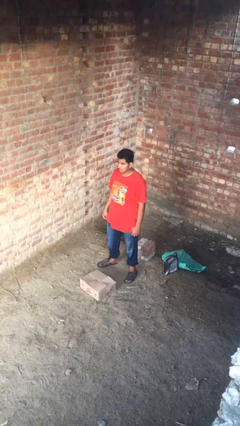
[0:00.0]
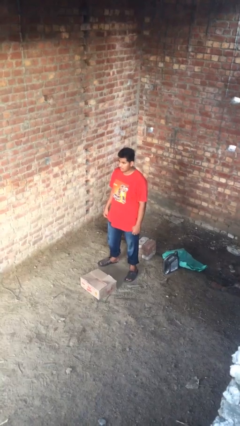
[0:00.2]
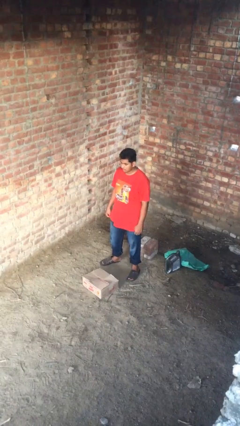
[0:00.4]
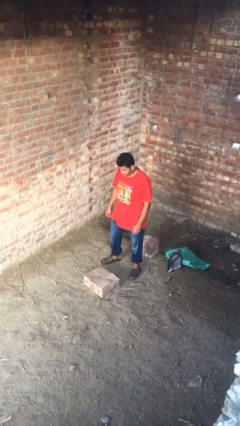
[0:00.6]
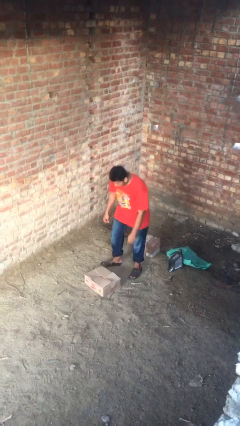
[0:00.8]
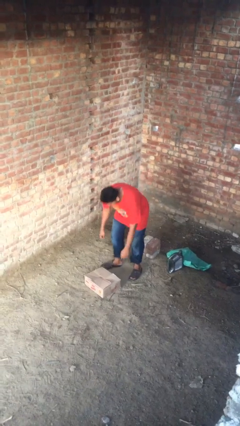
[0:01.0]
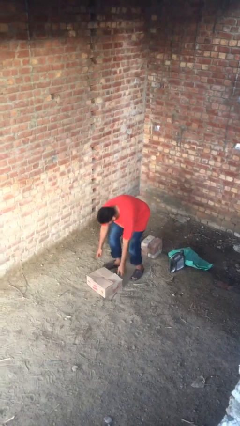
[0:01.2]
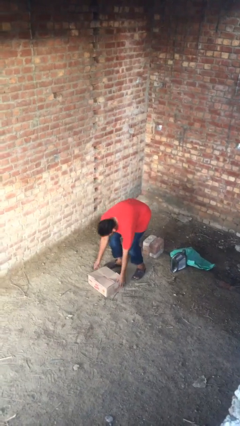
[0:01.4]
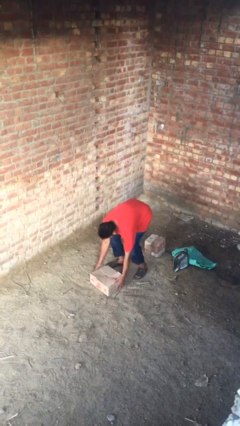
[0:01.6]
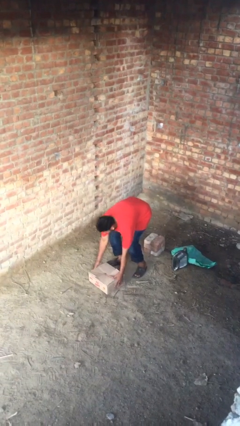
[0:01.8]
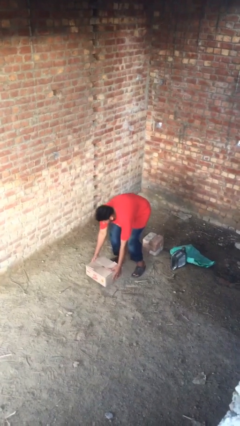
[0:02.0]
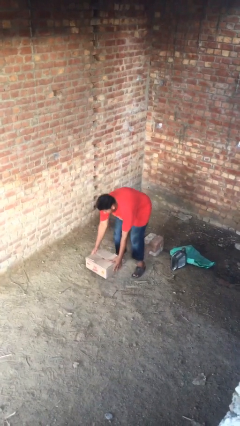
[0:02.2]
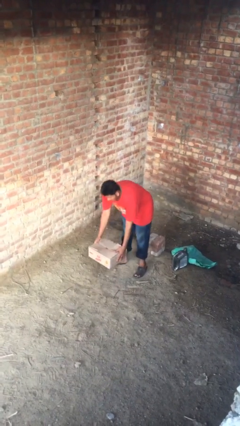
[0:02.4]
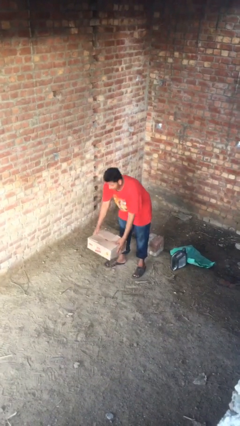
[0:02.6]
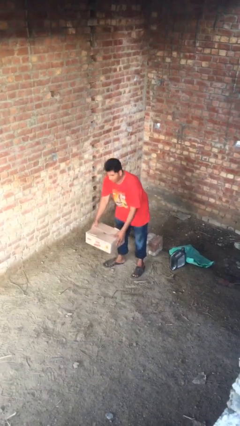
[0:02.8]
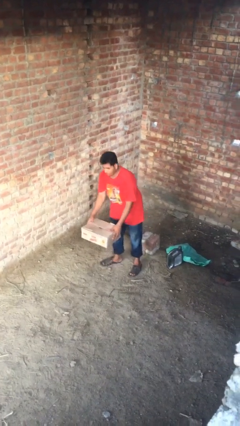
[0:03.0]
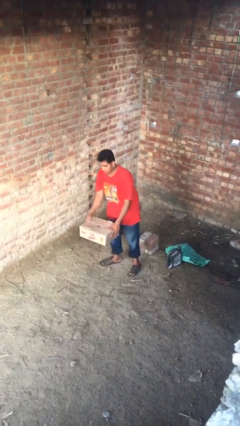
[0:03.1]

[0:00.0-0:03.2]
person picks up object from floor

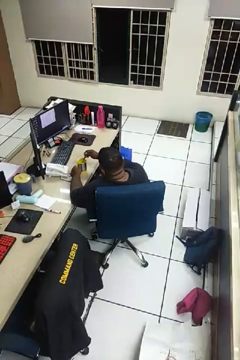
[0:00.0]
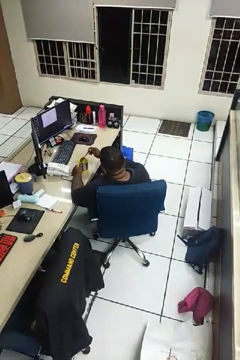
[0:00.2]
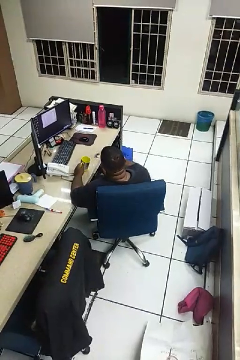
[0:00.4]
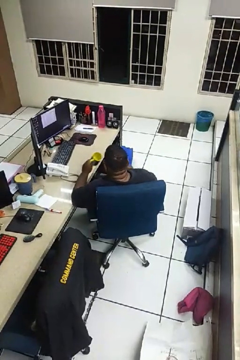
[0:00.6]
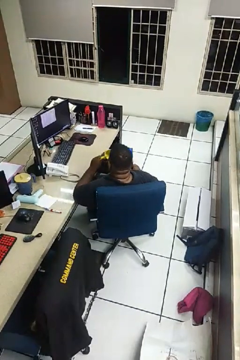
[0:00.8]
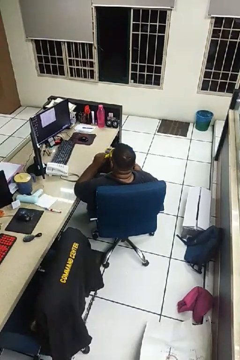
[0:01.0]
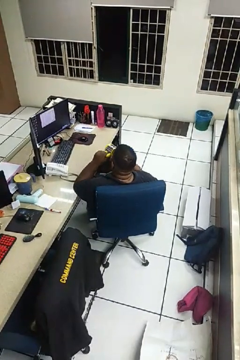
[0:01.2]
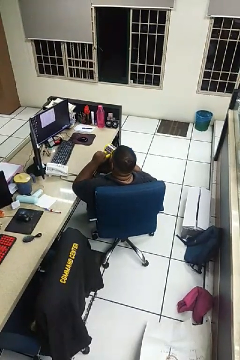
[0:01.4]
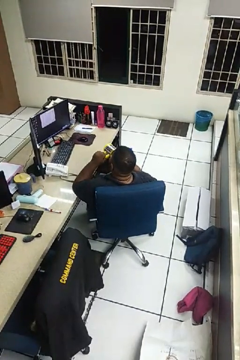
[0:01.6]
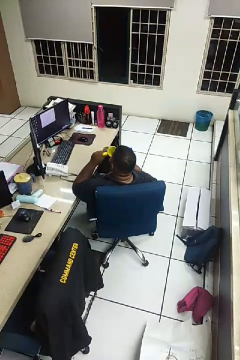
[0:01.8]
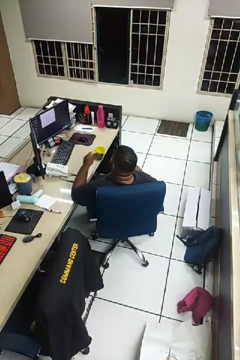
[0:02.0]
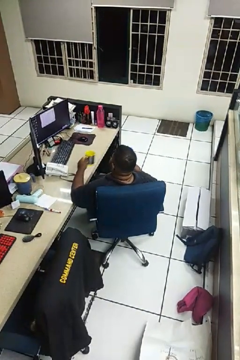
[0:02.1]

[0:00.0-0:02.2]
person drinks from mug

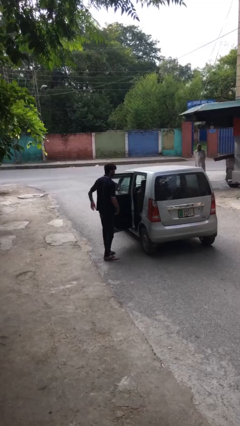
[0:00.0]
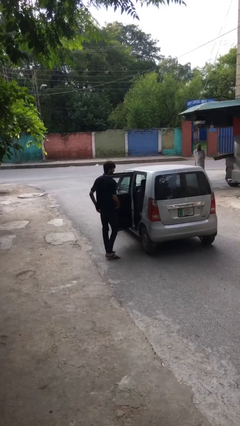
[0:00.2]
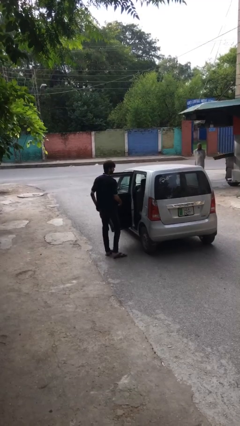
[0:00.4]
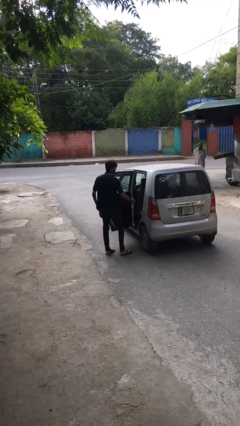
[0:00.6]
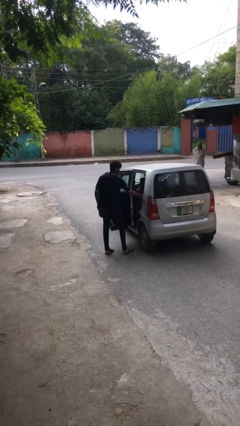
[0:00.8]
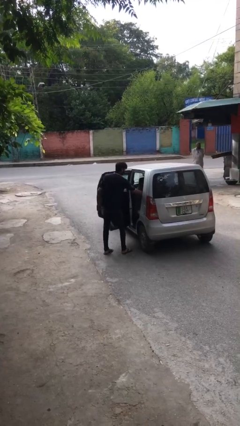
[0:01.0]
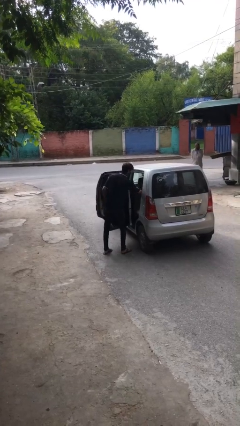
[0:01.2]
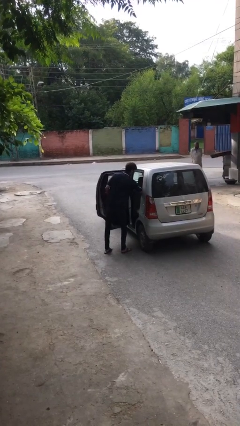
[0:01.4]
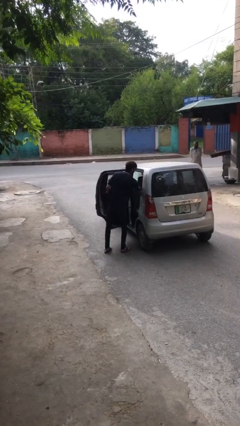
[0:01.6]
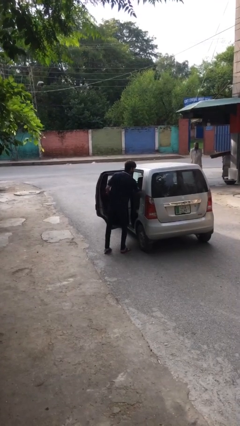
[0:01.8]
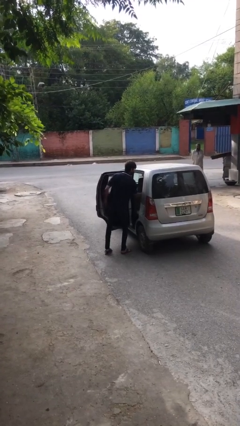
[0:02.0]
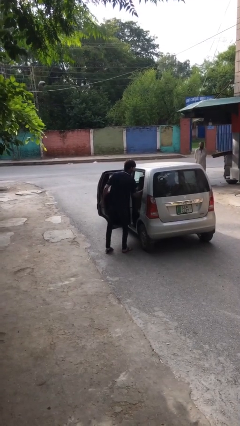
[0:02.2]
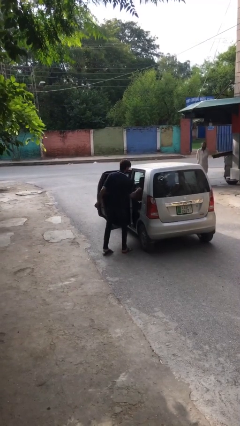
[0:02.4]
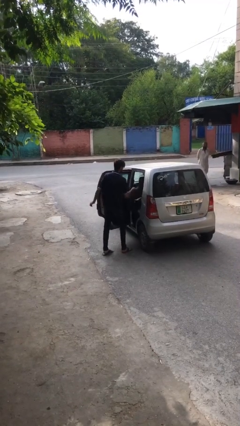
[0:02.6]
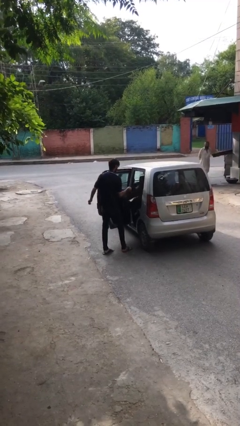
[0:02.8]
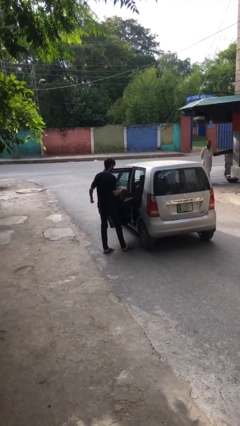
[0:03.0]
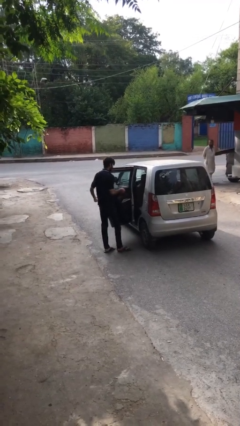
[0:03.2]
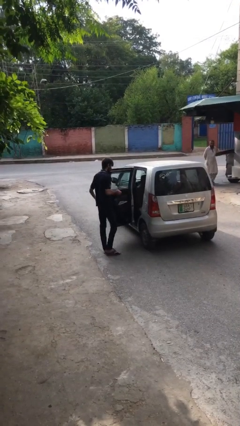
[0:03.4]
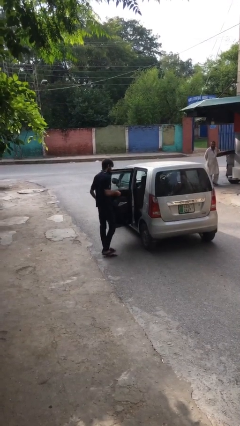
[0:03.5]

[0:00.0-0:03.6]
person unloads car

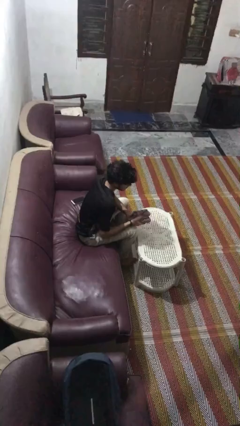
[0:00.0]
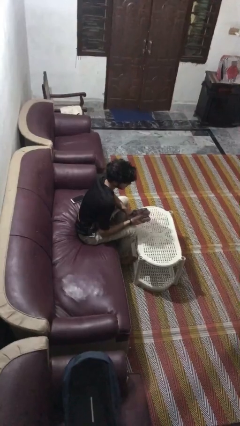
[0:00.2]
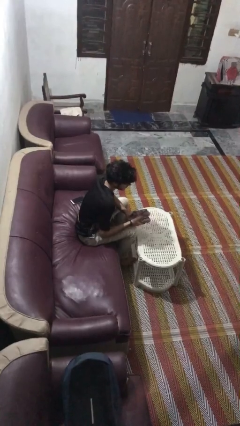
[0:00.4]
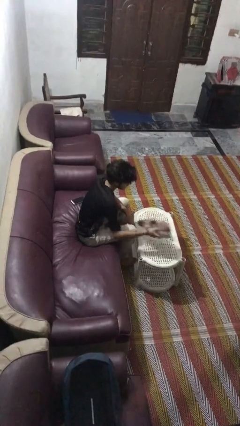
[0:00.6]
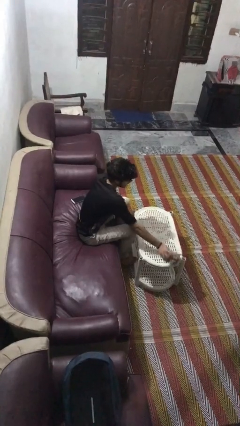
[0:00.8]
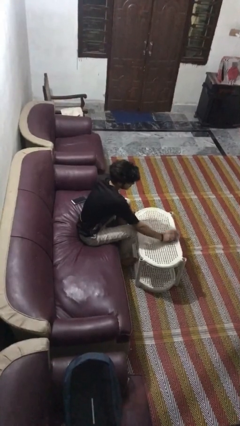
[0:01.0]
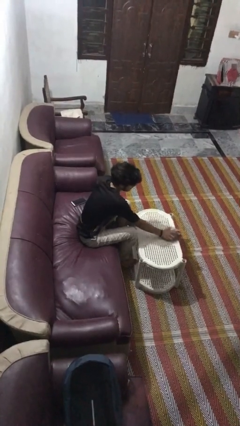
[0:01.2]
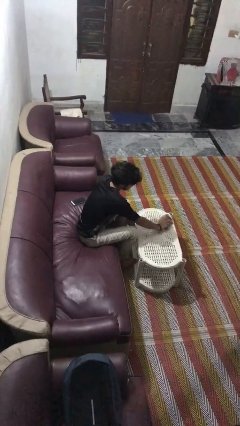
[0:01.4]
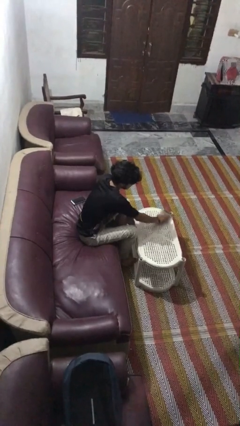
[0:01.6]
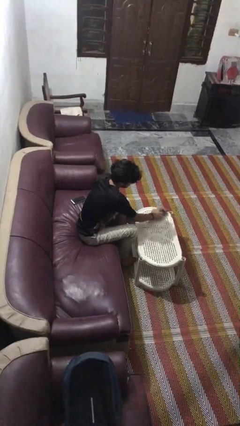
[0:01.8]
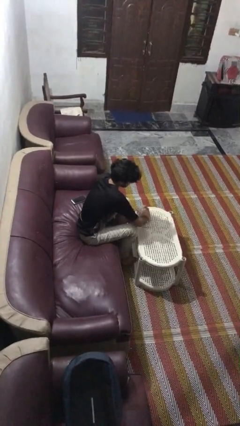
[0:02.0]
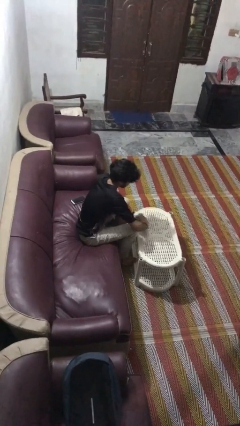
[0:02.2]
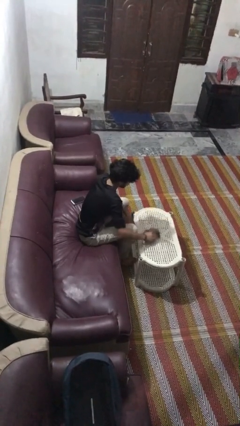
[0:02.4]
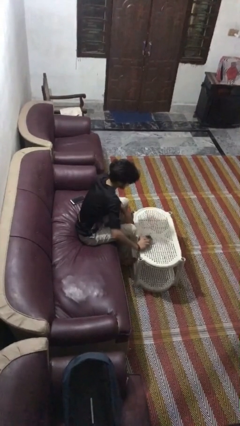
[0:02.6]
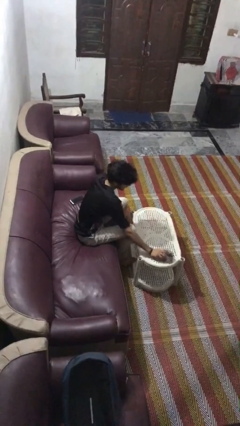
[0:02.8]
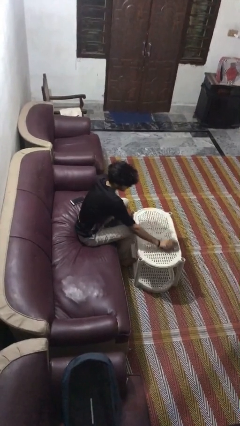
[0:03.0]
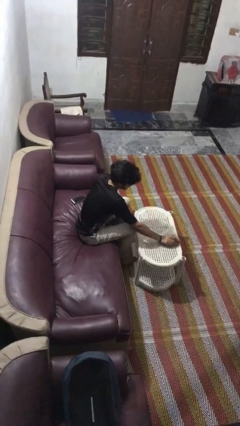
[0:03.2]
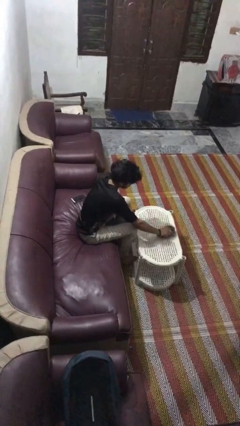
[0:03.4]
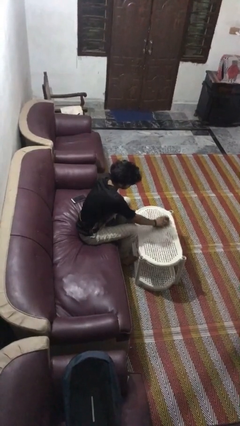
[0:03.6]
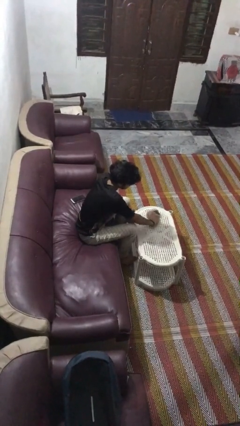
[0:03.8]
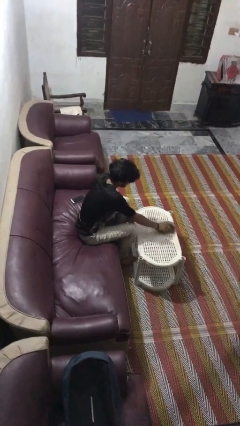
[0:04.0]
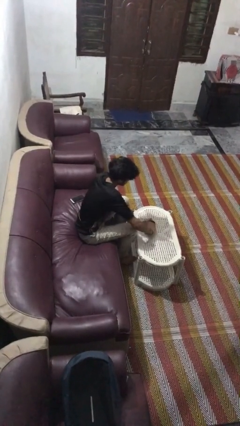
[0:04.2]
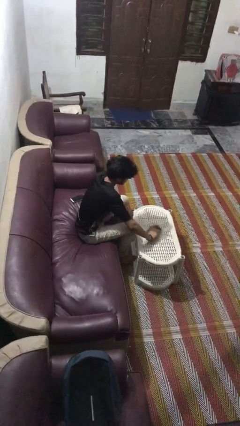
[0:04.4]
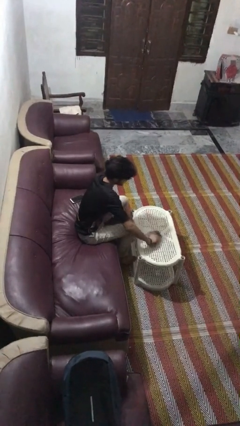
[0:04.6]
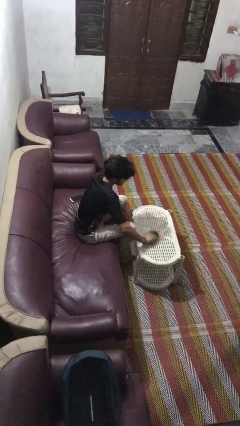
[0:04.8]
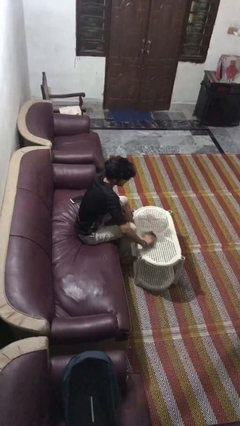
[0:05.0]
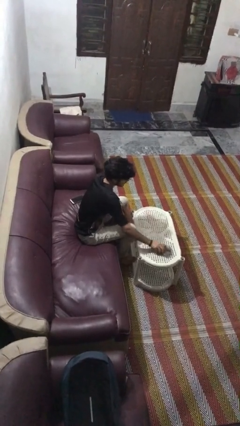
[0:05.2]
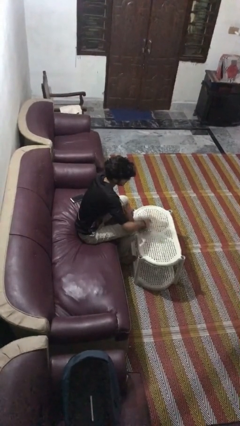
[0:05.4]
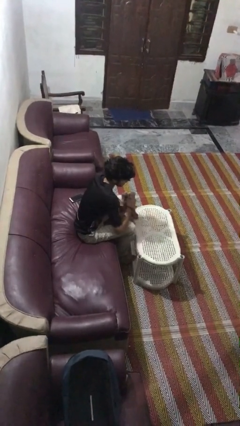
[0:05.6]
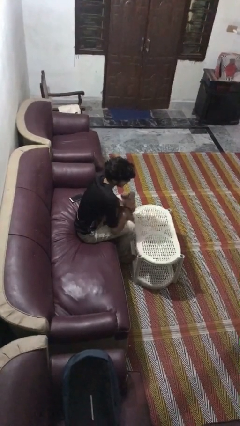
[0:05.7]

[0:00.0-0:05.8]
person cleans table with rag

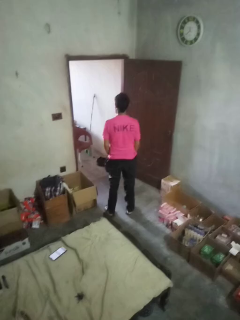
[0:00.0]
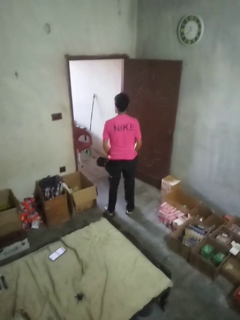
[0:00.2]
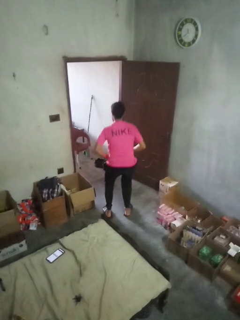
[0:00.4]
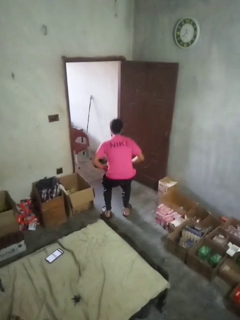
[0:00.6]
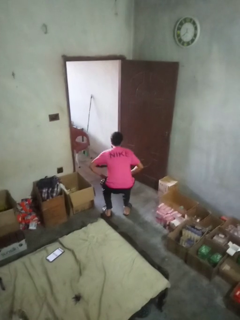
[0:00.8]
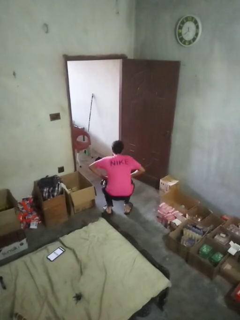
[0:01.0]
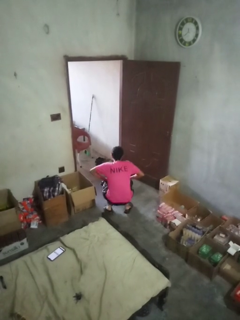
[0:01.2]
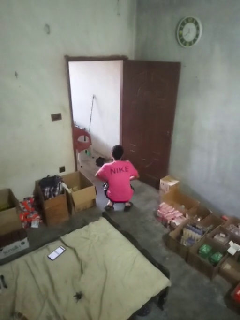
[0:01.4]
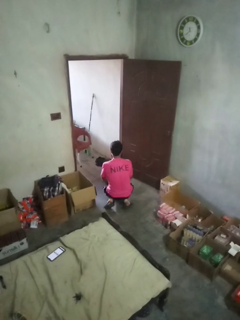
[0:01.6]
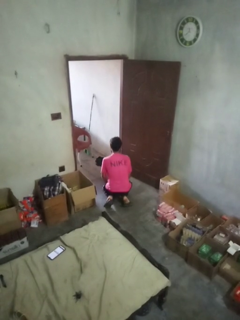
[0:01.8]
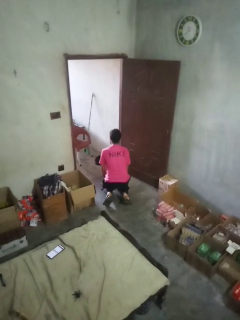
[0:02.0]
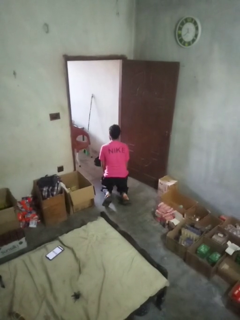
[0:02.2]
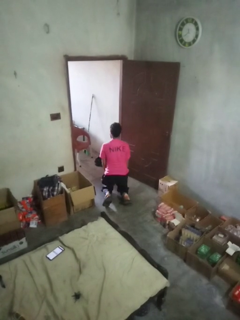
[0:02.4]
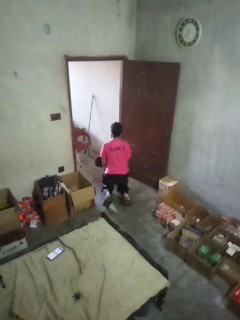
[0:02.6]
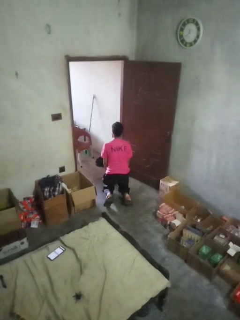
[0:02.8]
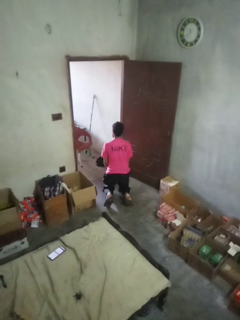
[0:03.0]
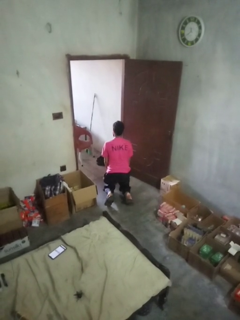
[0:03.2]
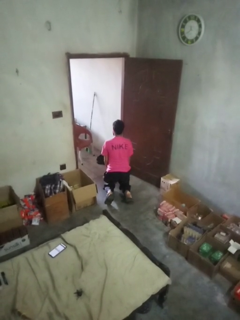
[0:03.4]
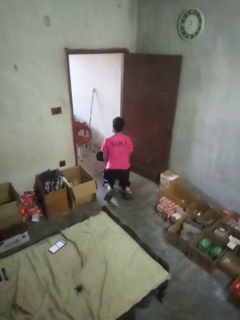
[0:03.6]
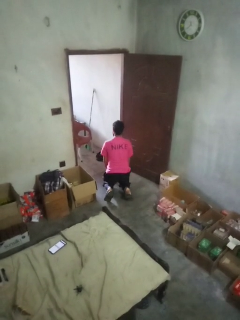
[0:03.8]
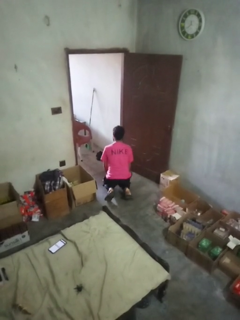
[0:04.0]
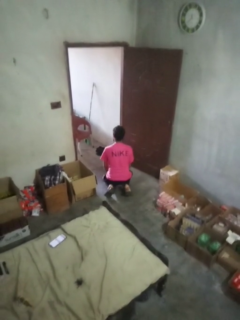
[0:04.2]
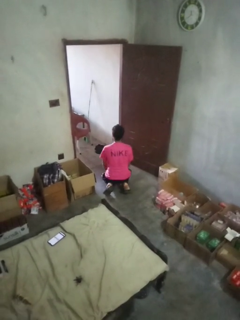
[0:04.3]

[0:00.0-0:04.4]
person kneels
